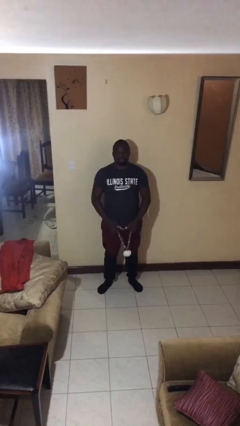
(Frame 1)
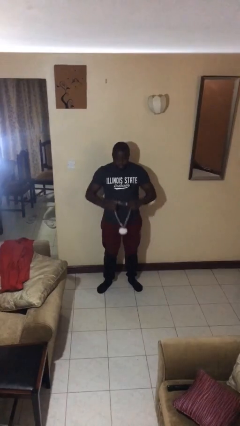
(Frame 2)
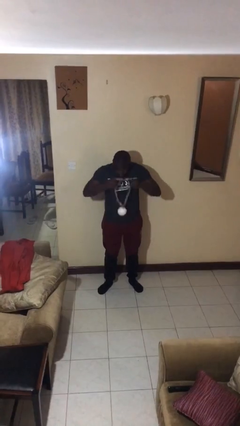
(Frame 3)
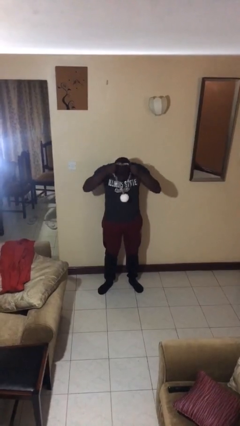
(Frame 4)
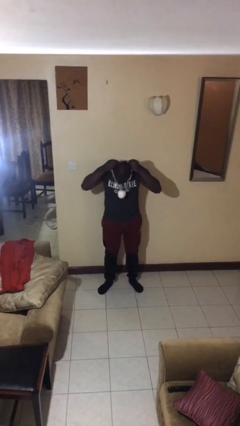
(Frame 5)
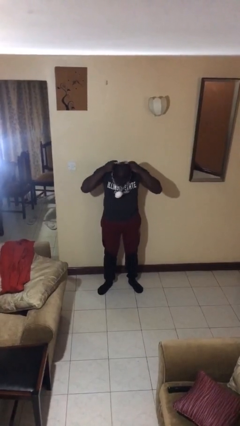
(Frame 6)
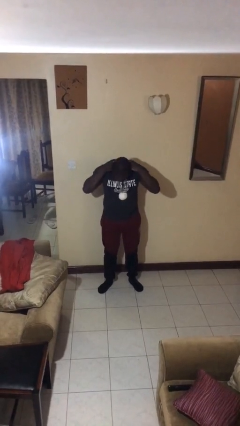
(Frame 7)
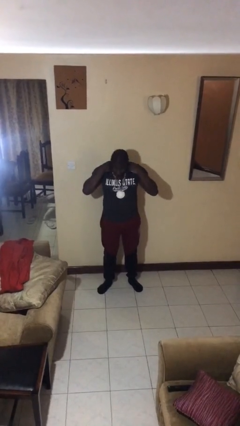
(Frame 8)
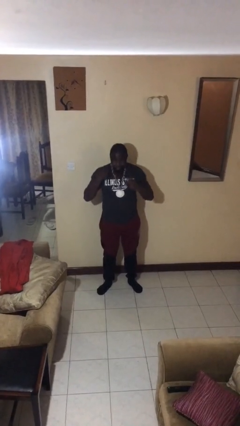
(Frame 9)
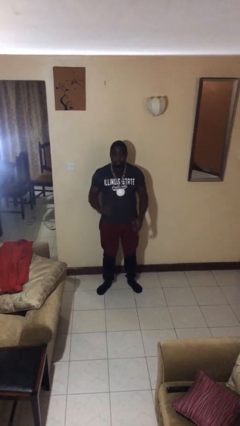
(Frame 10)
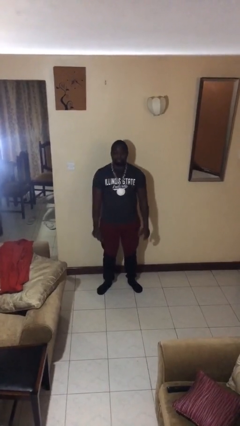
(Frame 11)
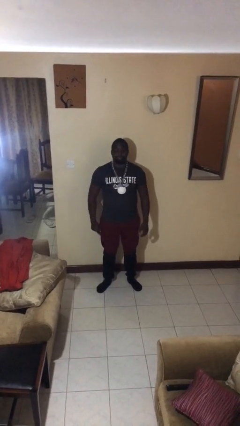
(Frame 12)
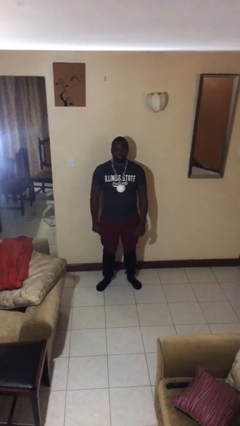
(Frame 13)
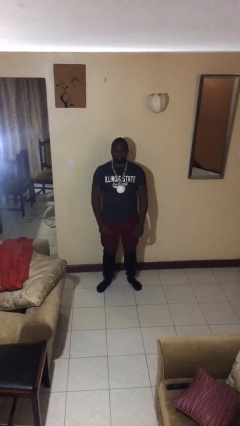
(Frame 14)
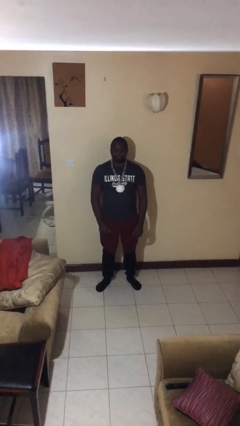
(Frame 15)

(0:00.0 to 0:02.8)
person puts on necklace

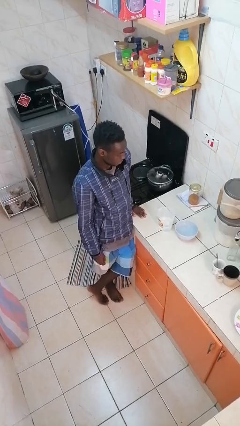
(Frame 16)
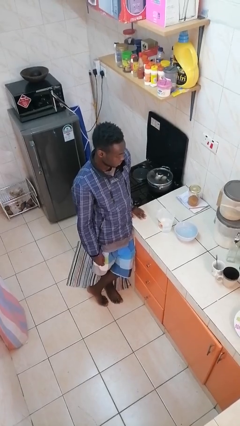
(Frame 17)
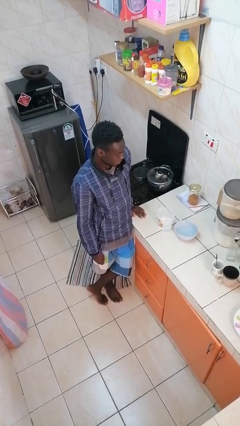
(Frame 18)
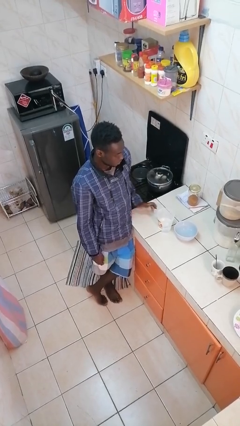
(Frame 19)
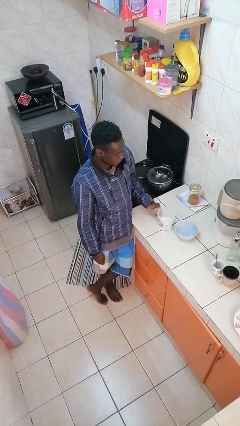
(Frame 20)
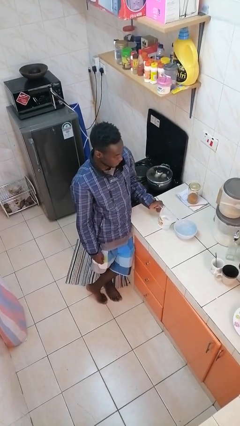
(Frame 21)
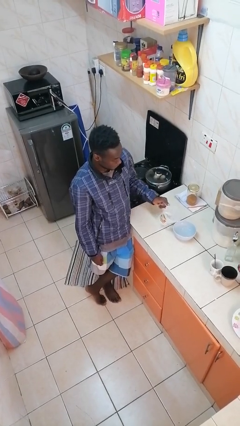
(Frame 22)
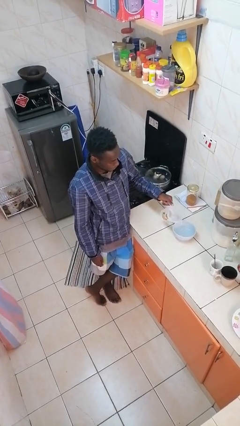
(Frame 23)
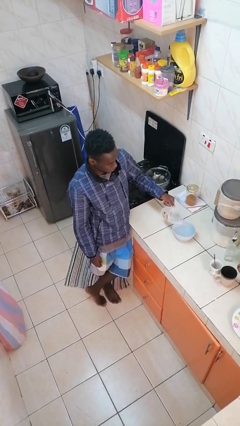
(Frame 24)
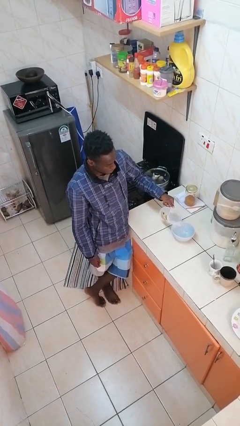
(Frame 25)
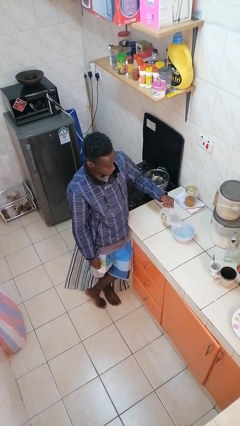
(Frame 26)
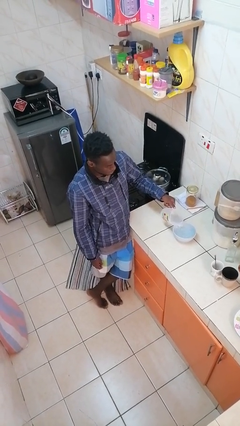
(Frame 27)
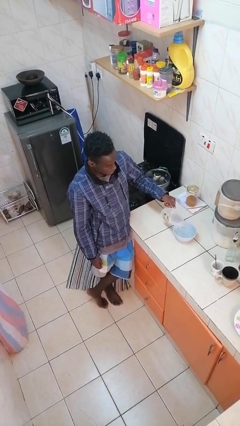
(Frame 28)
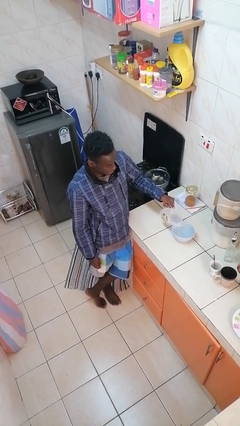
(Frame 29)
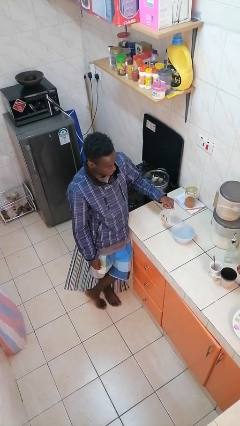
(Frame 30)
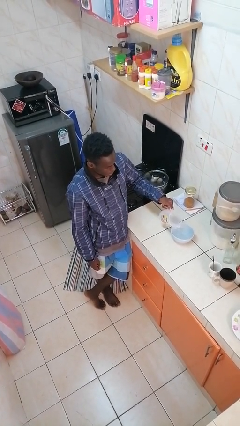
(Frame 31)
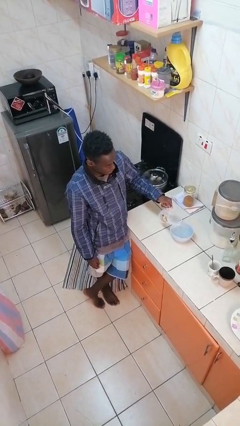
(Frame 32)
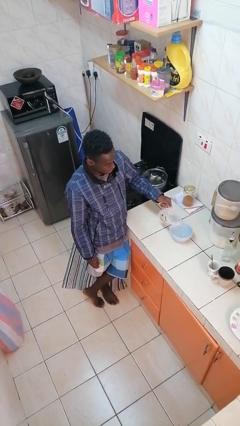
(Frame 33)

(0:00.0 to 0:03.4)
person pours into bowl

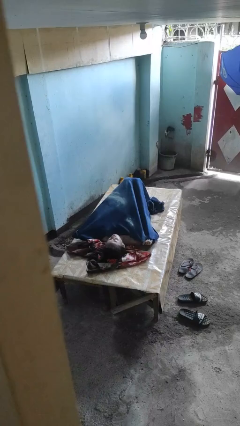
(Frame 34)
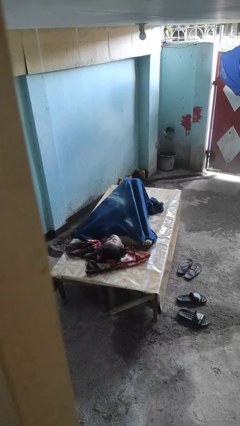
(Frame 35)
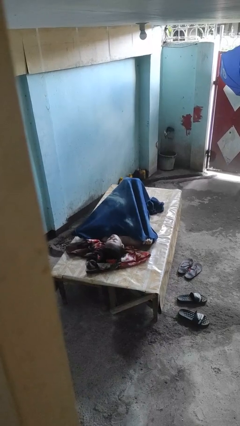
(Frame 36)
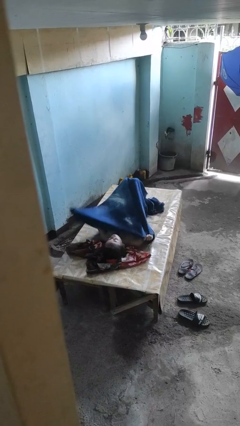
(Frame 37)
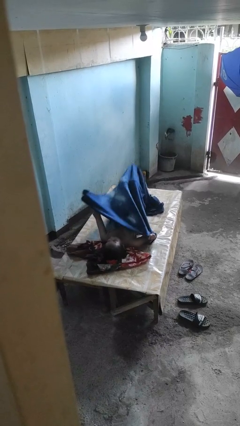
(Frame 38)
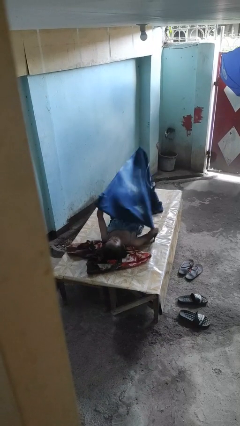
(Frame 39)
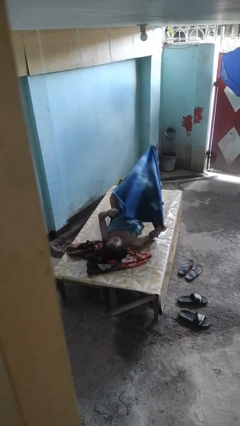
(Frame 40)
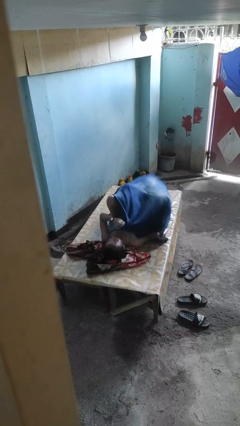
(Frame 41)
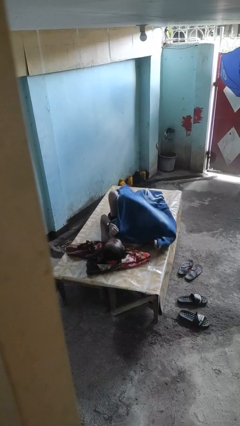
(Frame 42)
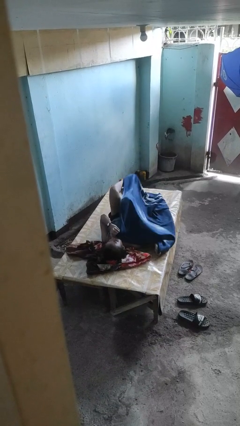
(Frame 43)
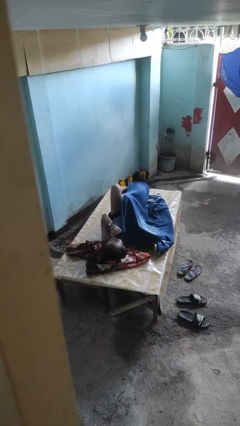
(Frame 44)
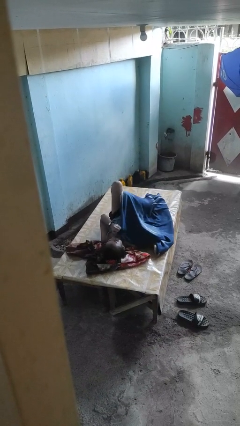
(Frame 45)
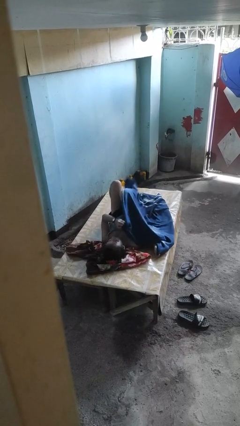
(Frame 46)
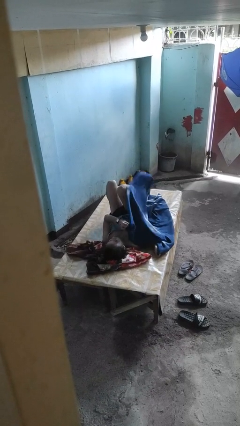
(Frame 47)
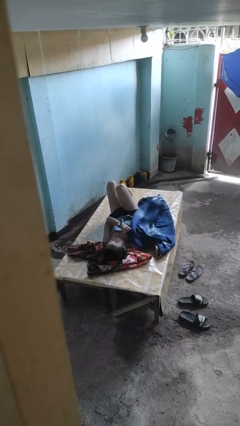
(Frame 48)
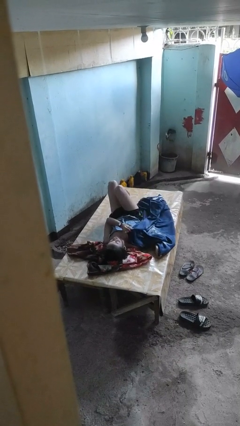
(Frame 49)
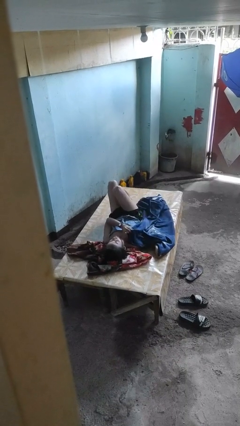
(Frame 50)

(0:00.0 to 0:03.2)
person uncovers with bedsheets

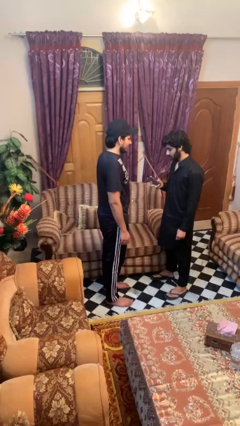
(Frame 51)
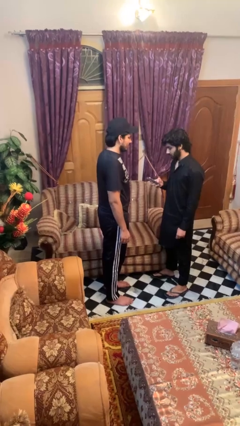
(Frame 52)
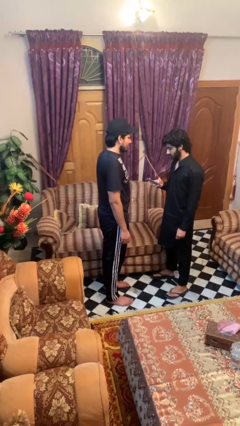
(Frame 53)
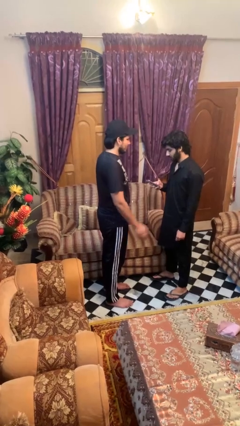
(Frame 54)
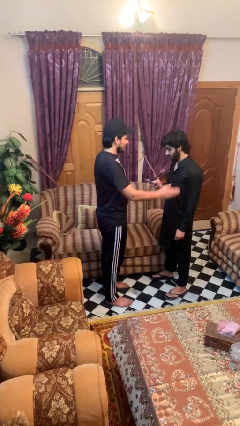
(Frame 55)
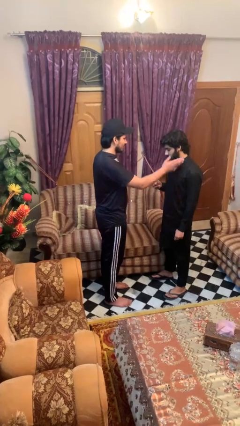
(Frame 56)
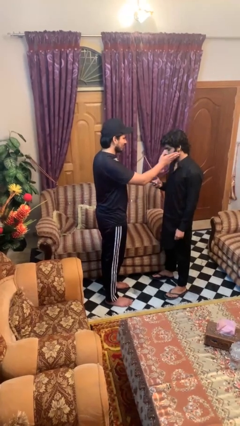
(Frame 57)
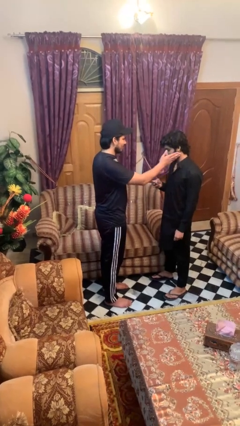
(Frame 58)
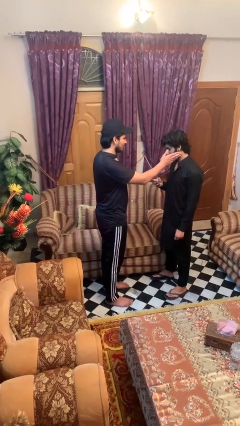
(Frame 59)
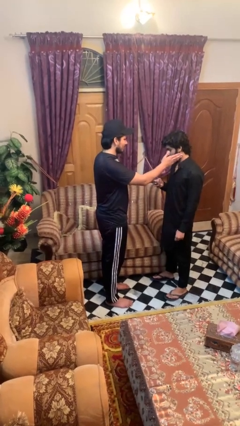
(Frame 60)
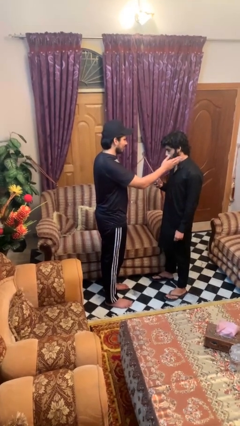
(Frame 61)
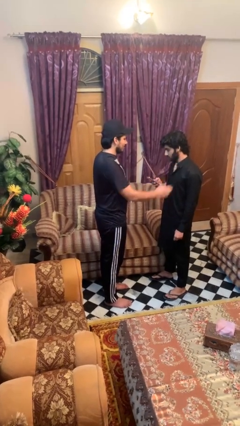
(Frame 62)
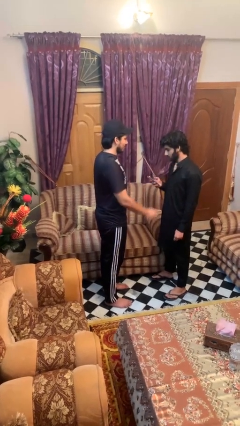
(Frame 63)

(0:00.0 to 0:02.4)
person touches face of person

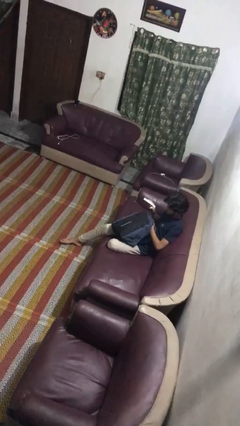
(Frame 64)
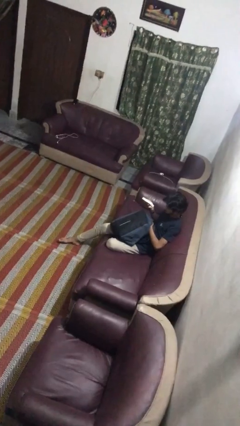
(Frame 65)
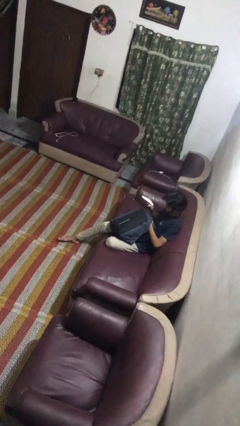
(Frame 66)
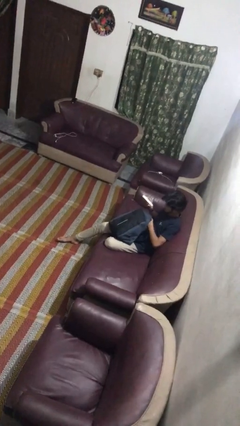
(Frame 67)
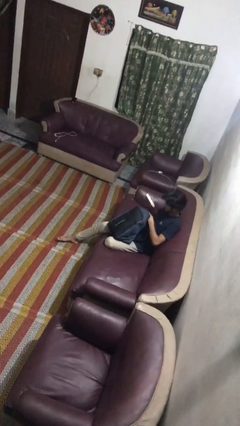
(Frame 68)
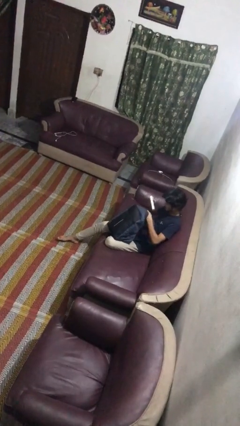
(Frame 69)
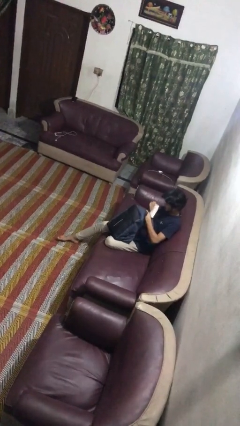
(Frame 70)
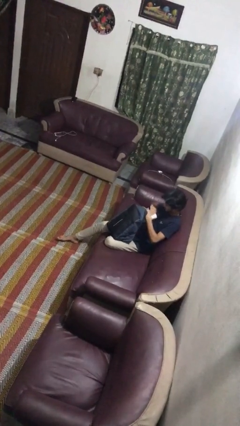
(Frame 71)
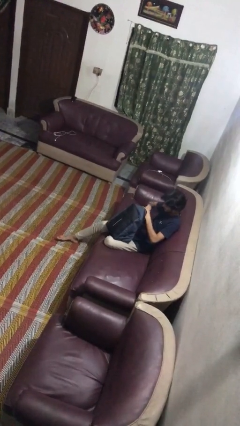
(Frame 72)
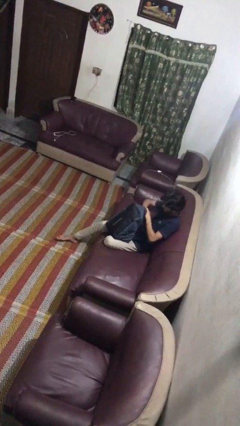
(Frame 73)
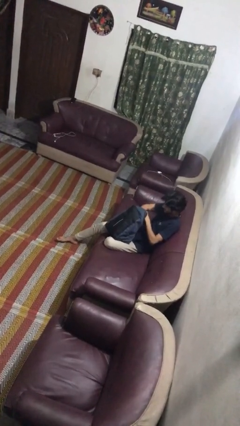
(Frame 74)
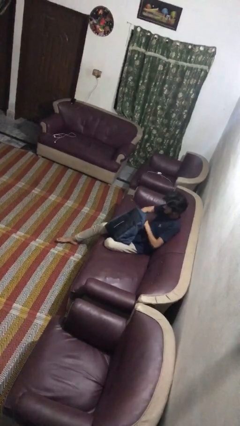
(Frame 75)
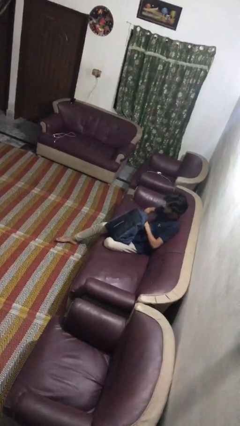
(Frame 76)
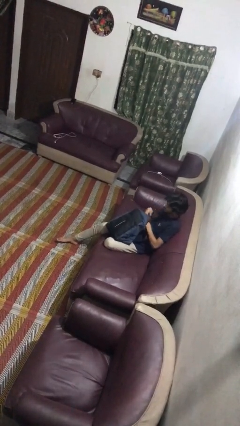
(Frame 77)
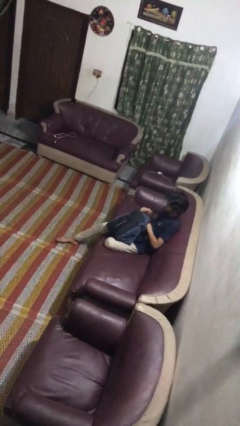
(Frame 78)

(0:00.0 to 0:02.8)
person puts object into backpack

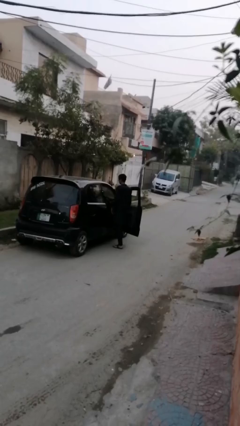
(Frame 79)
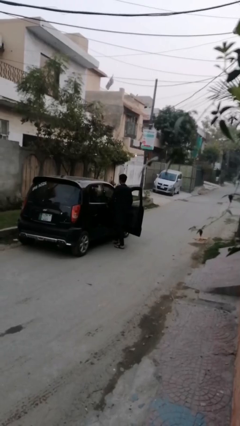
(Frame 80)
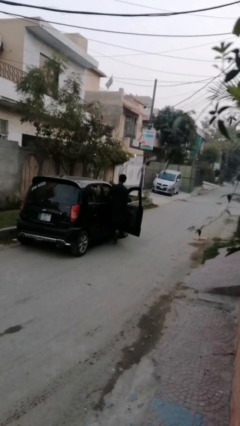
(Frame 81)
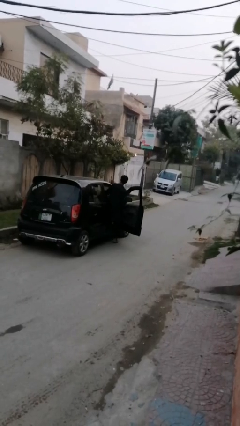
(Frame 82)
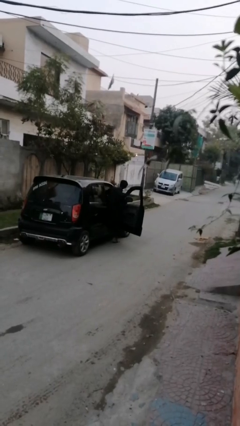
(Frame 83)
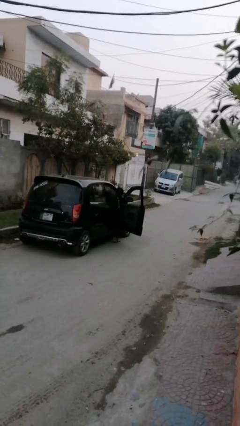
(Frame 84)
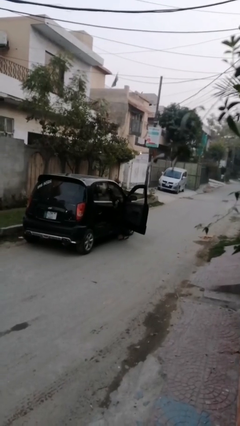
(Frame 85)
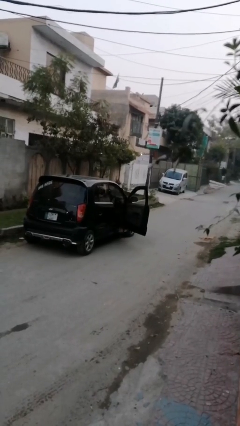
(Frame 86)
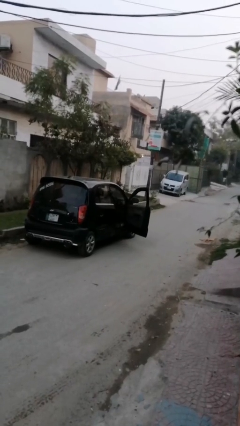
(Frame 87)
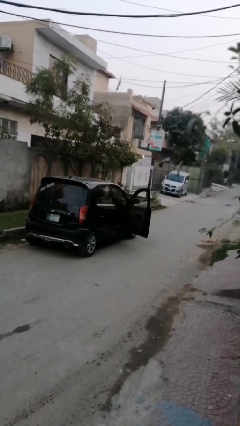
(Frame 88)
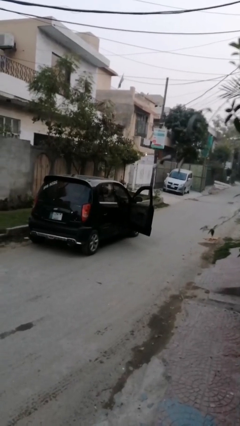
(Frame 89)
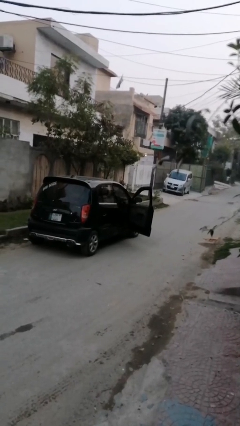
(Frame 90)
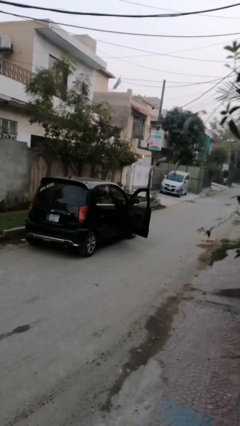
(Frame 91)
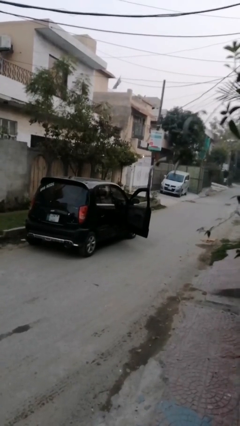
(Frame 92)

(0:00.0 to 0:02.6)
person enters car

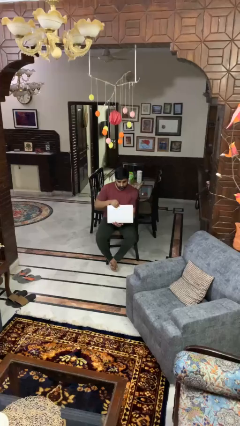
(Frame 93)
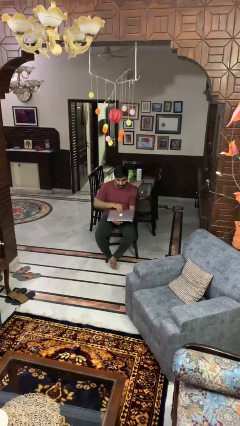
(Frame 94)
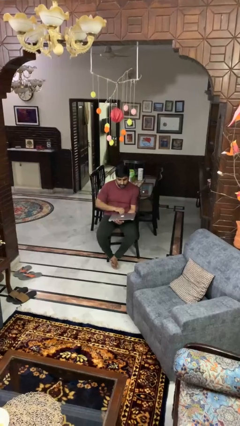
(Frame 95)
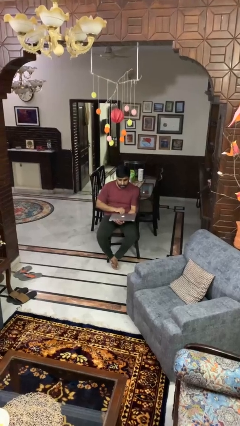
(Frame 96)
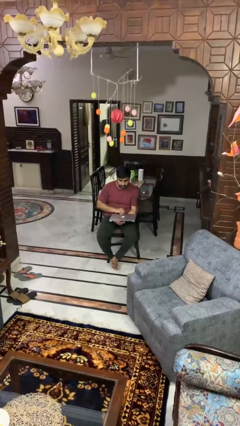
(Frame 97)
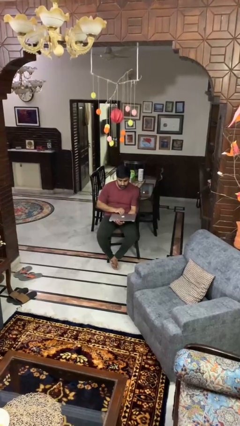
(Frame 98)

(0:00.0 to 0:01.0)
person closes laptop
